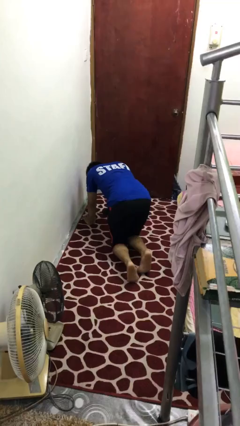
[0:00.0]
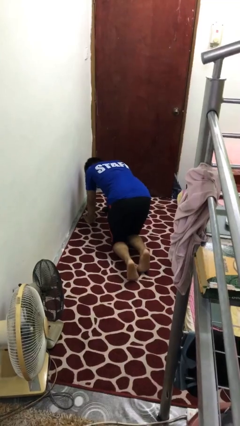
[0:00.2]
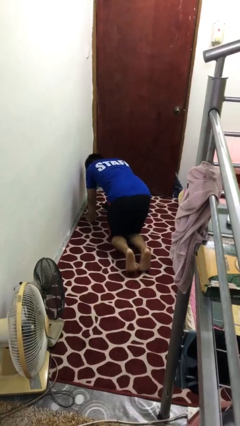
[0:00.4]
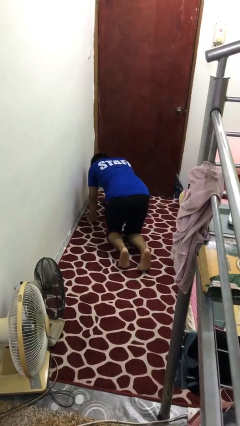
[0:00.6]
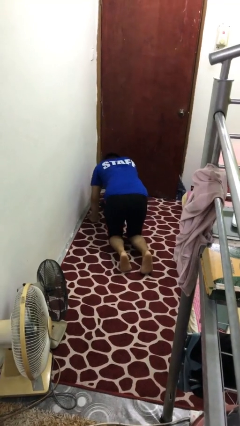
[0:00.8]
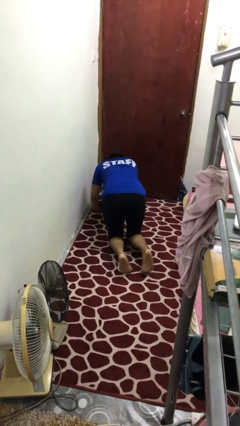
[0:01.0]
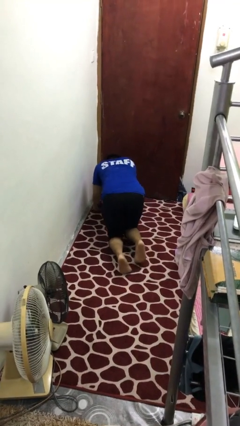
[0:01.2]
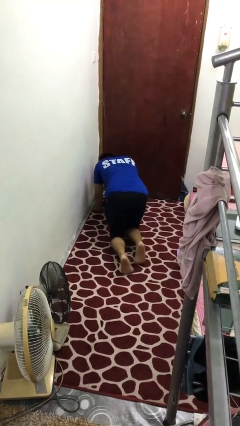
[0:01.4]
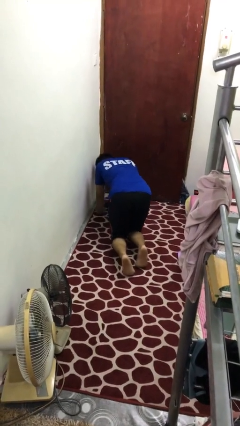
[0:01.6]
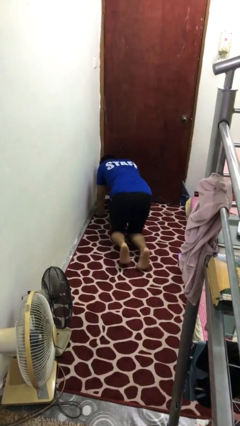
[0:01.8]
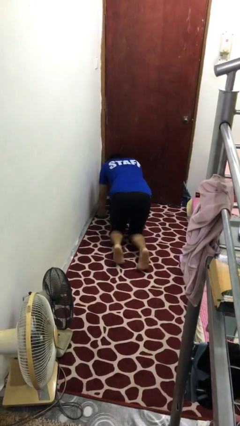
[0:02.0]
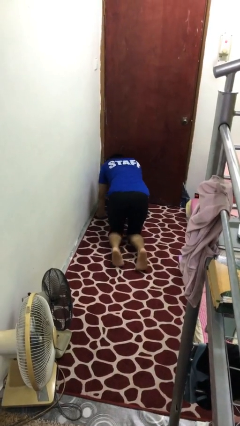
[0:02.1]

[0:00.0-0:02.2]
person crawls

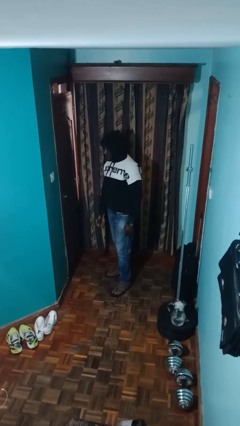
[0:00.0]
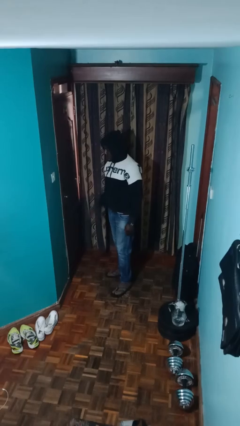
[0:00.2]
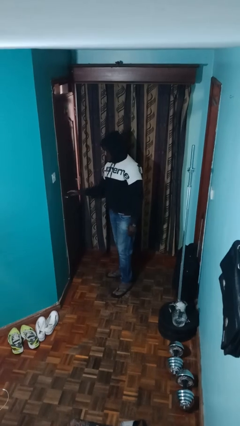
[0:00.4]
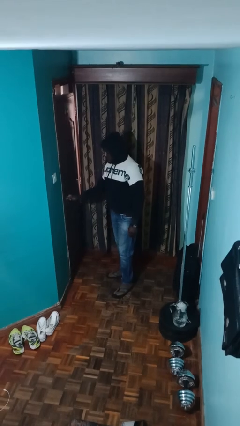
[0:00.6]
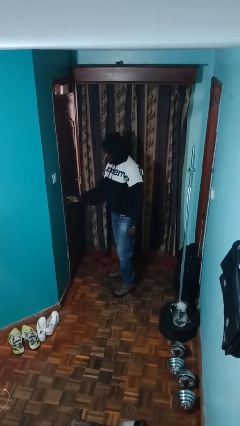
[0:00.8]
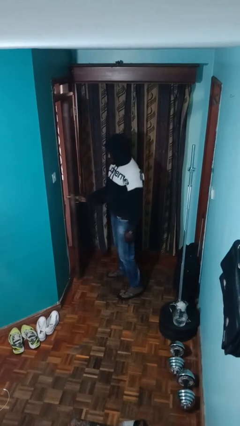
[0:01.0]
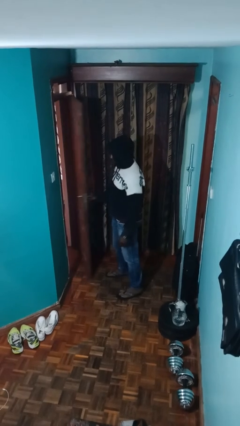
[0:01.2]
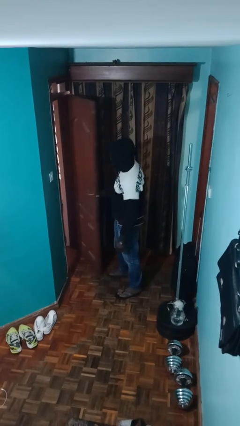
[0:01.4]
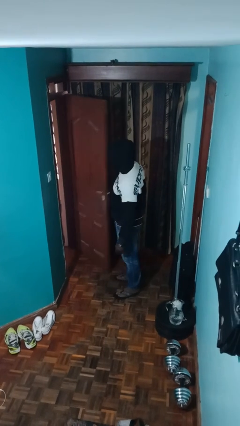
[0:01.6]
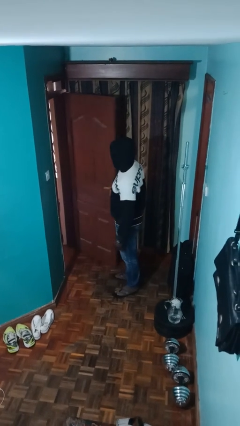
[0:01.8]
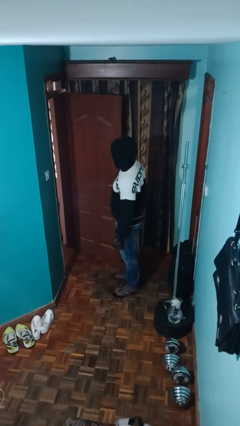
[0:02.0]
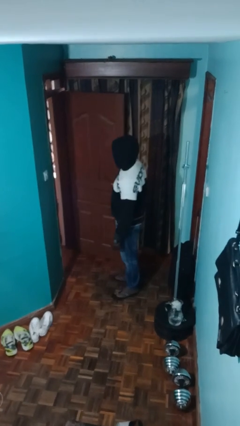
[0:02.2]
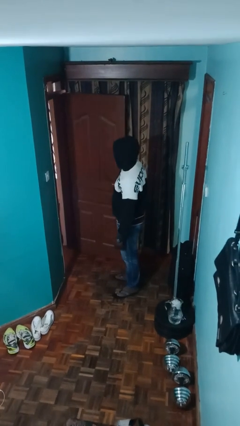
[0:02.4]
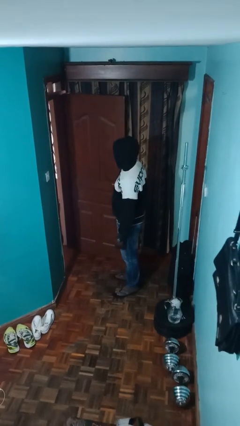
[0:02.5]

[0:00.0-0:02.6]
person opens facility door

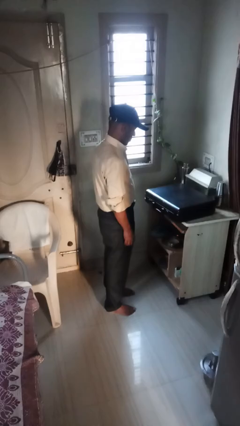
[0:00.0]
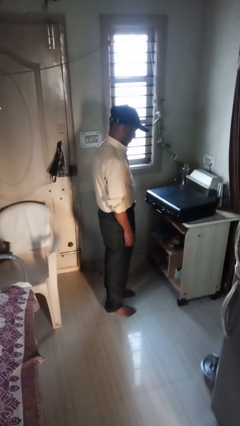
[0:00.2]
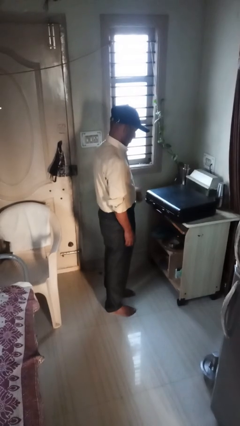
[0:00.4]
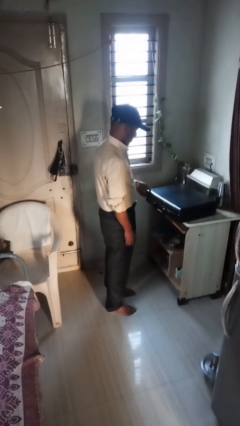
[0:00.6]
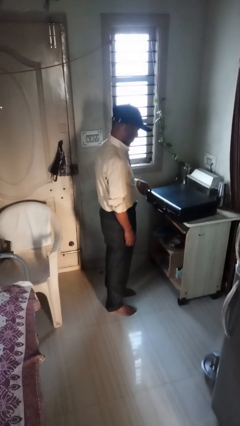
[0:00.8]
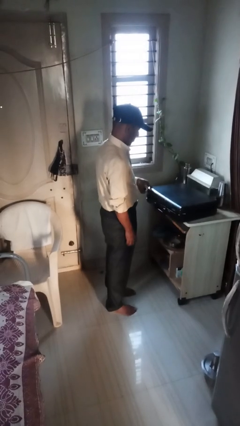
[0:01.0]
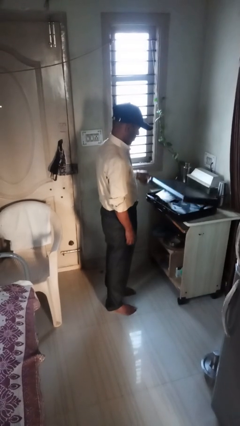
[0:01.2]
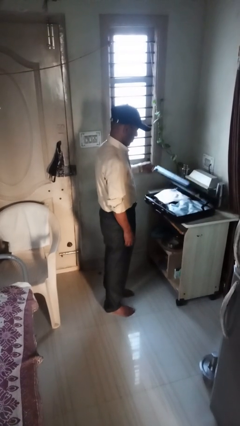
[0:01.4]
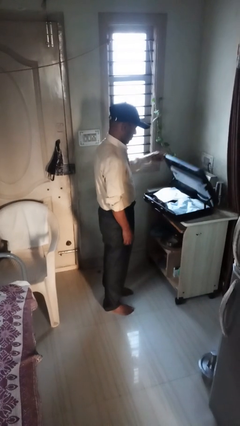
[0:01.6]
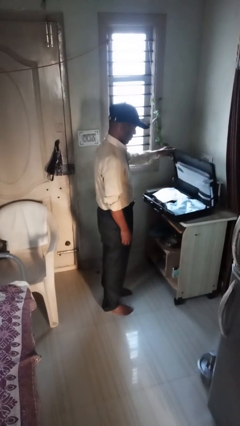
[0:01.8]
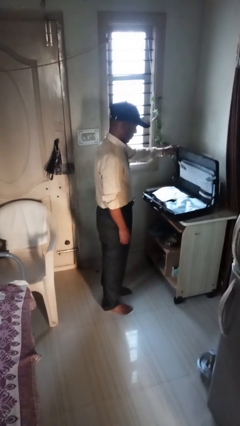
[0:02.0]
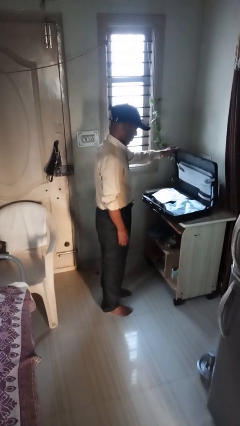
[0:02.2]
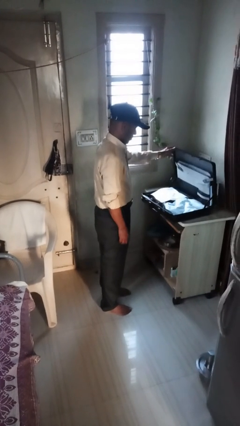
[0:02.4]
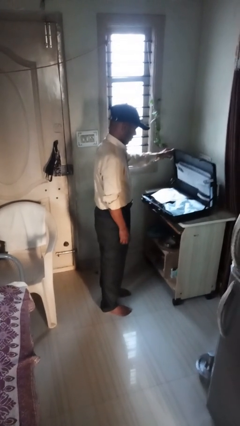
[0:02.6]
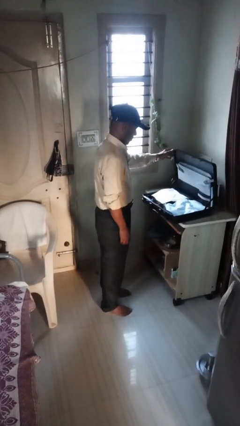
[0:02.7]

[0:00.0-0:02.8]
person opens suitcase

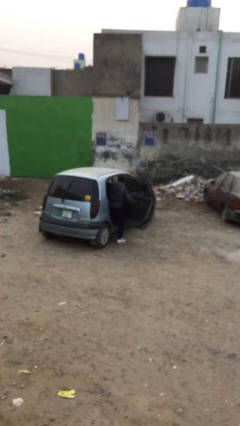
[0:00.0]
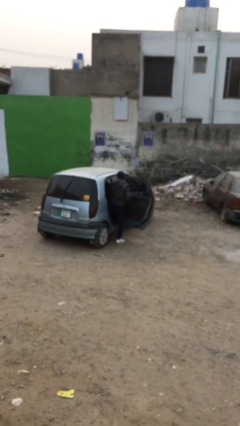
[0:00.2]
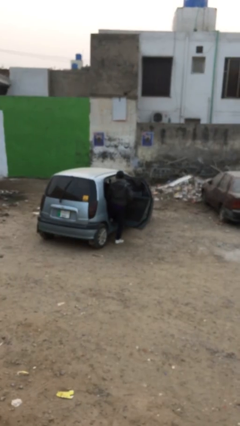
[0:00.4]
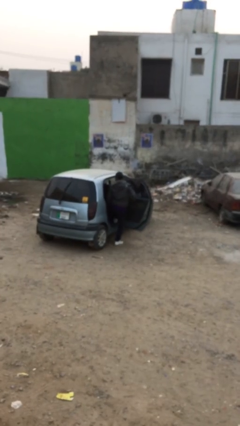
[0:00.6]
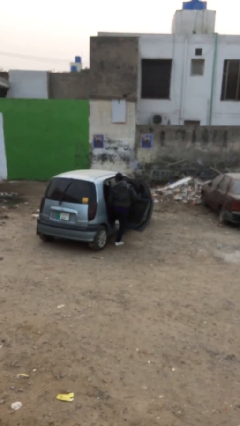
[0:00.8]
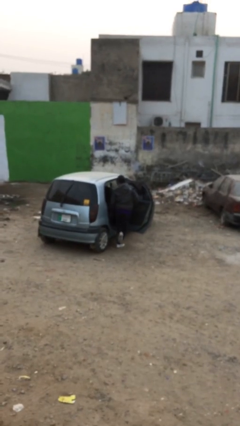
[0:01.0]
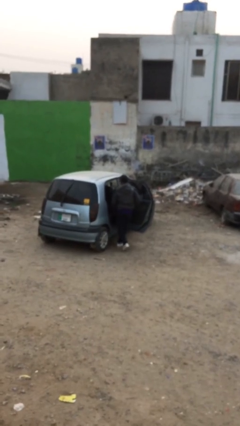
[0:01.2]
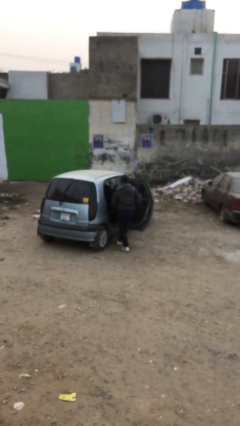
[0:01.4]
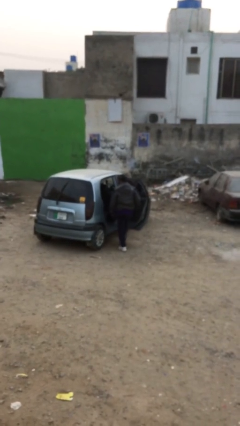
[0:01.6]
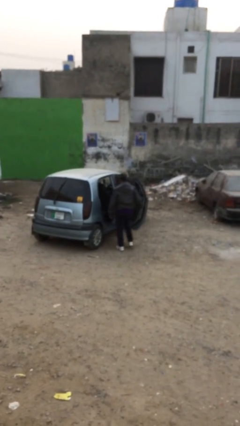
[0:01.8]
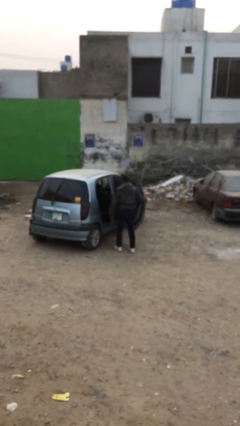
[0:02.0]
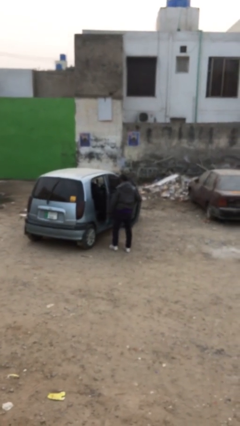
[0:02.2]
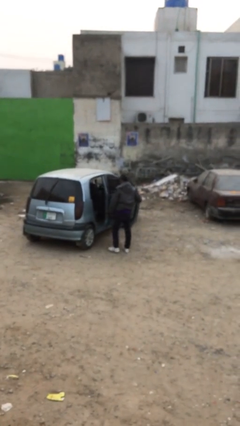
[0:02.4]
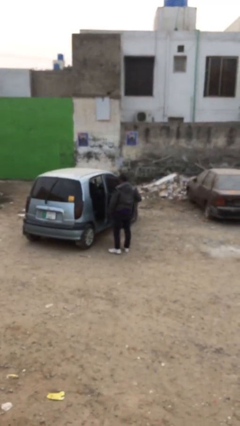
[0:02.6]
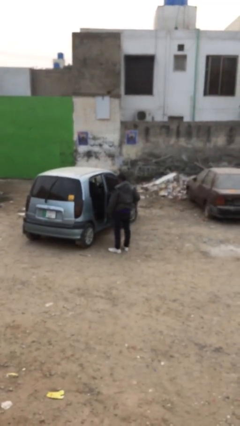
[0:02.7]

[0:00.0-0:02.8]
person exits car

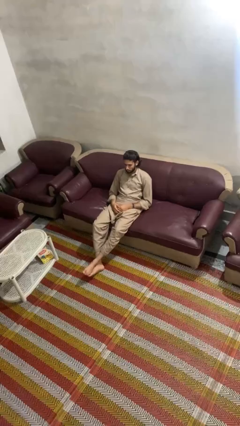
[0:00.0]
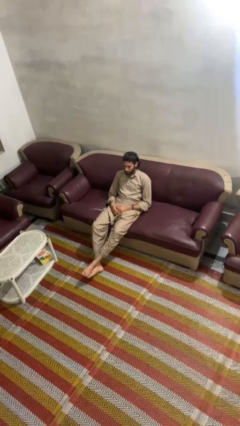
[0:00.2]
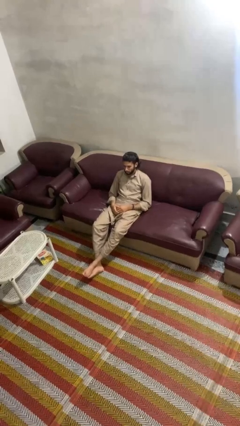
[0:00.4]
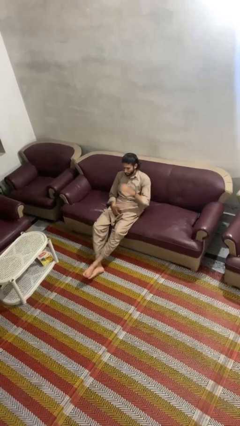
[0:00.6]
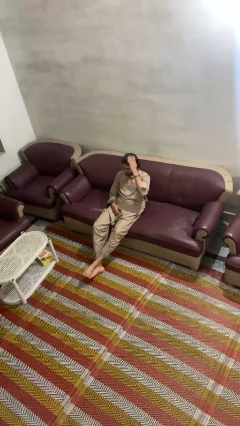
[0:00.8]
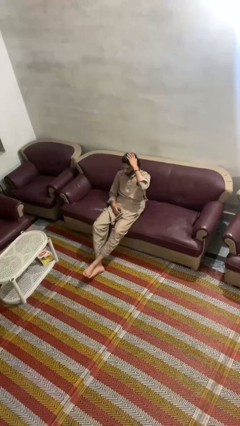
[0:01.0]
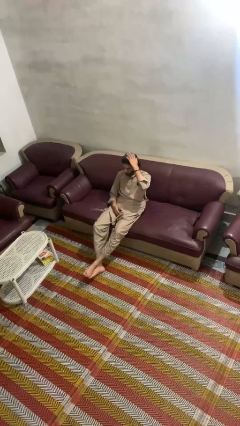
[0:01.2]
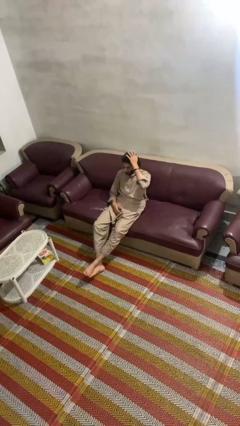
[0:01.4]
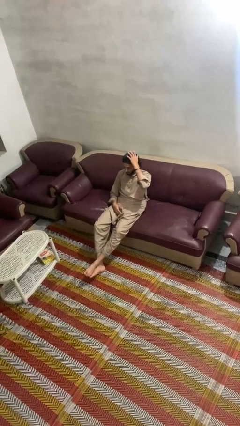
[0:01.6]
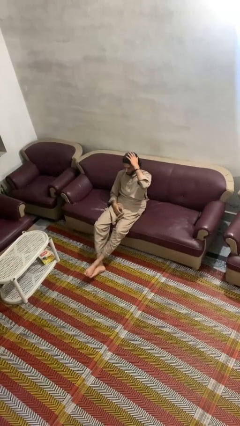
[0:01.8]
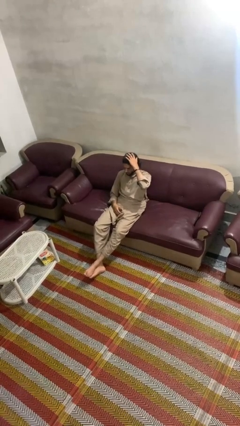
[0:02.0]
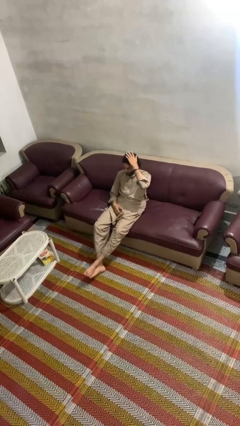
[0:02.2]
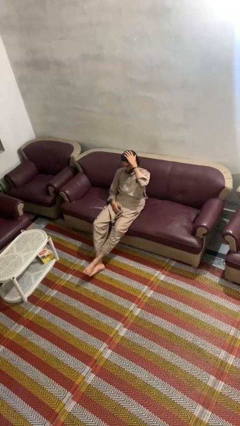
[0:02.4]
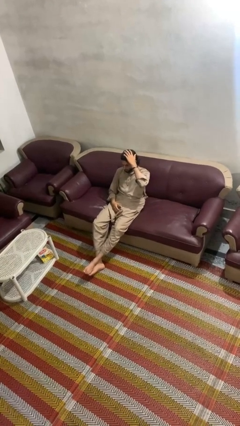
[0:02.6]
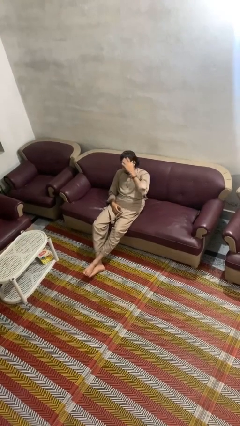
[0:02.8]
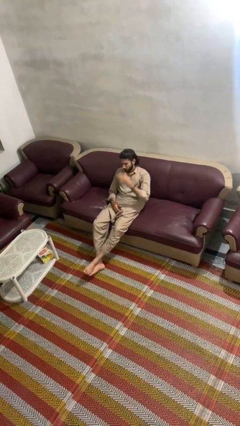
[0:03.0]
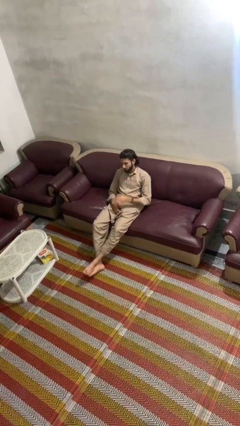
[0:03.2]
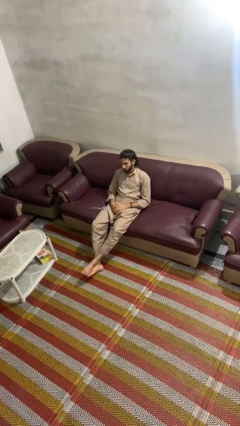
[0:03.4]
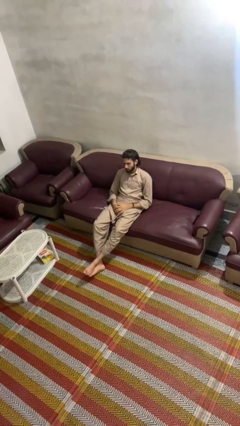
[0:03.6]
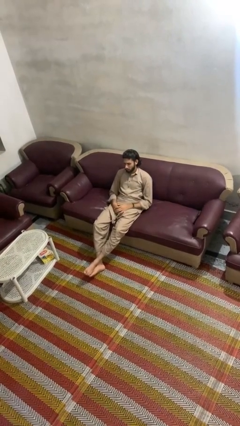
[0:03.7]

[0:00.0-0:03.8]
person pats head

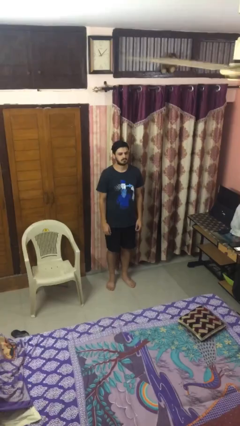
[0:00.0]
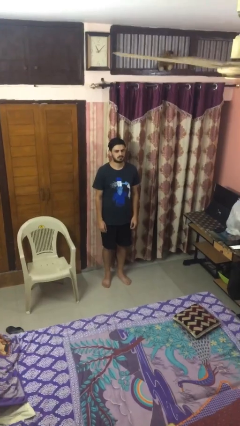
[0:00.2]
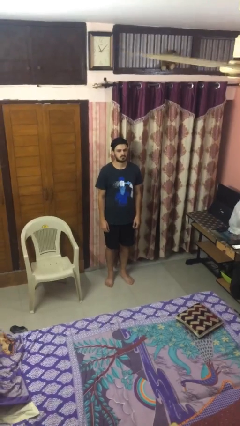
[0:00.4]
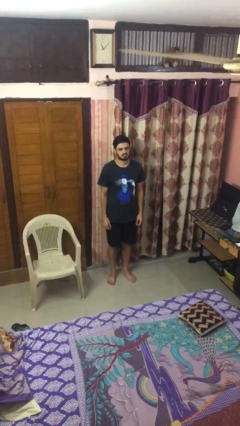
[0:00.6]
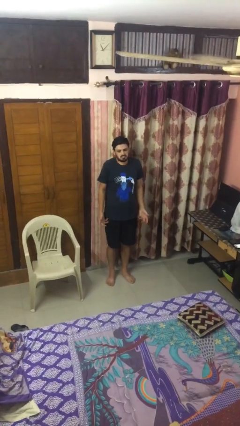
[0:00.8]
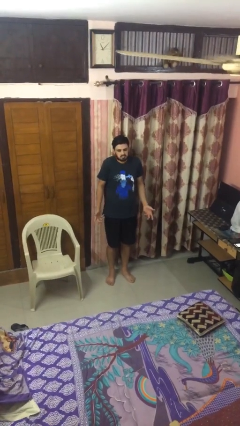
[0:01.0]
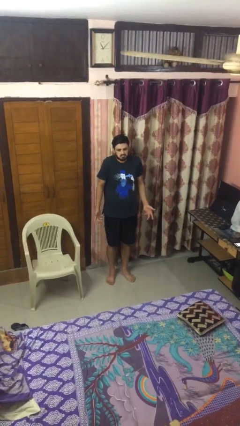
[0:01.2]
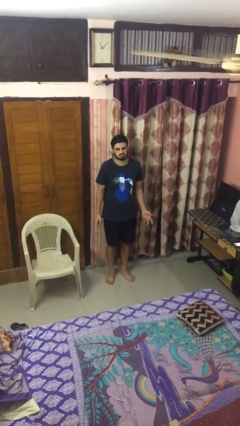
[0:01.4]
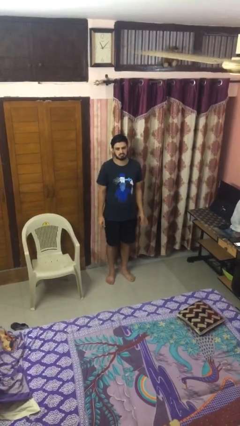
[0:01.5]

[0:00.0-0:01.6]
person shrugs

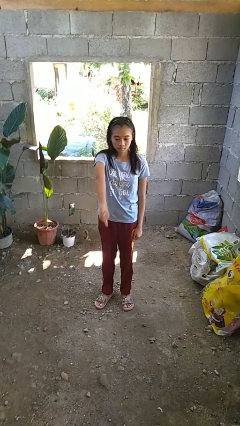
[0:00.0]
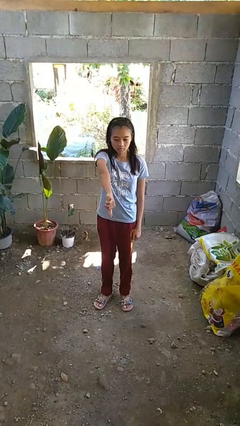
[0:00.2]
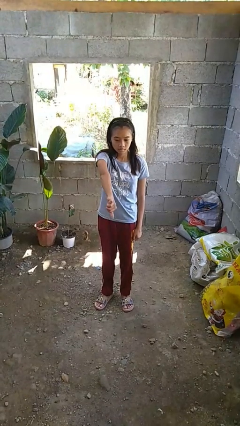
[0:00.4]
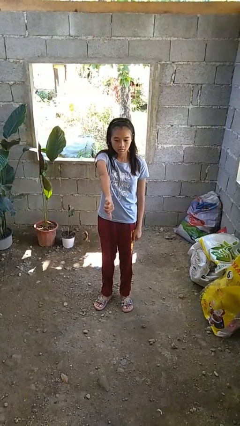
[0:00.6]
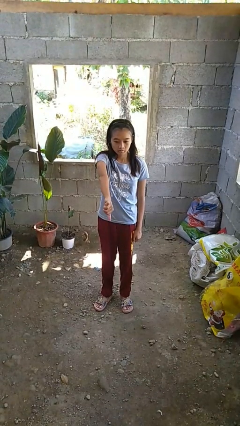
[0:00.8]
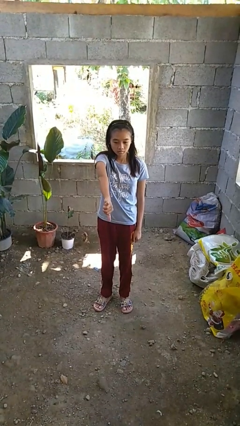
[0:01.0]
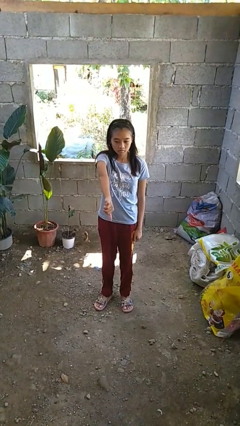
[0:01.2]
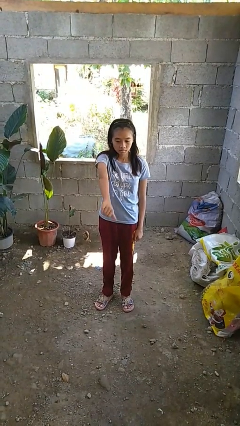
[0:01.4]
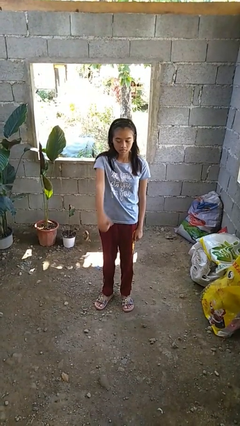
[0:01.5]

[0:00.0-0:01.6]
person gestures thumbs down
